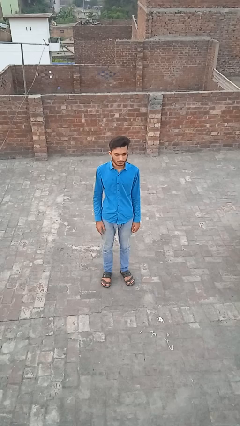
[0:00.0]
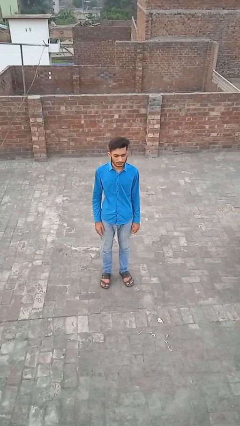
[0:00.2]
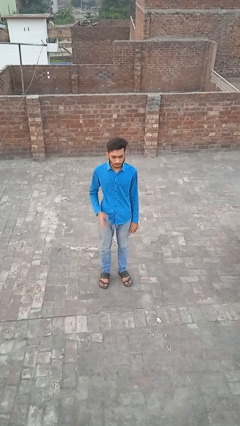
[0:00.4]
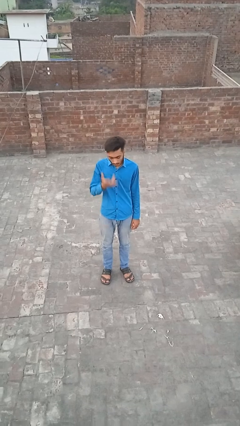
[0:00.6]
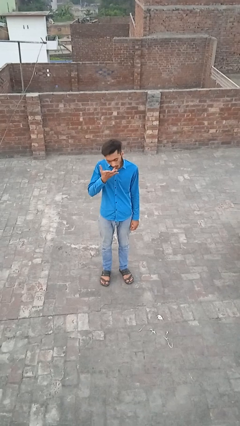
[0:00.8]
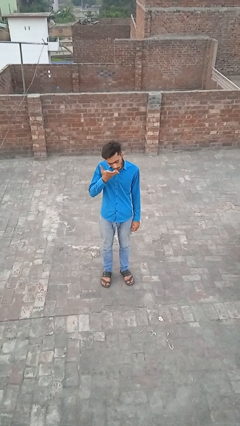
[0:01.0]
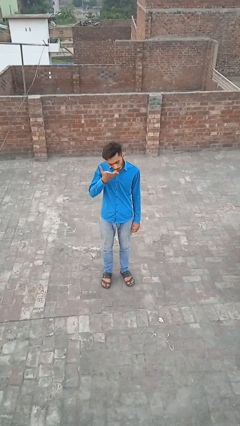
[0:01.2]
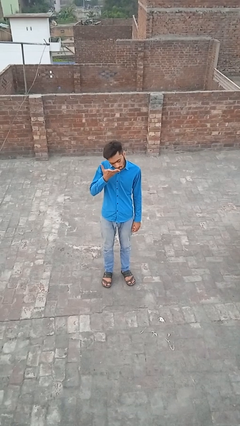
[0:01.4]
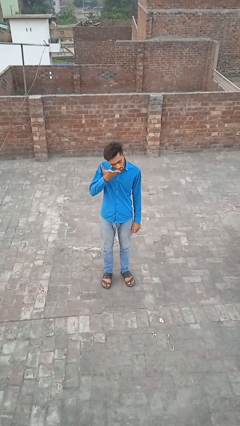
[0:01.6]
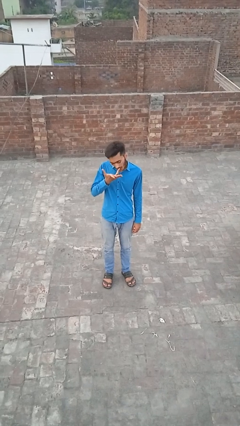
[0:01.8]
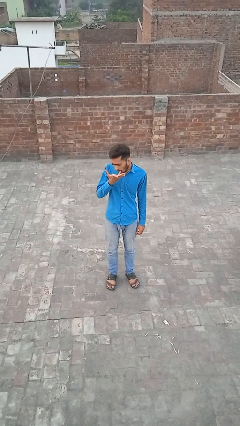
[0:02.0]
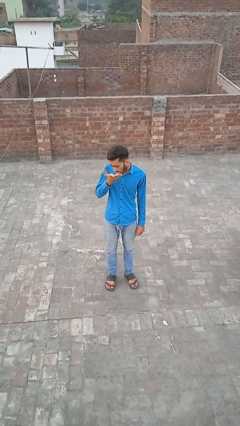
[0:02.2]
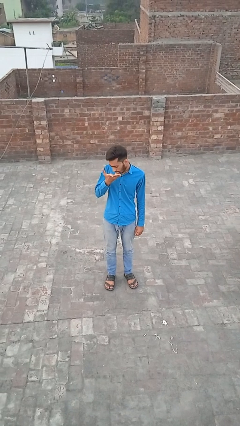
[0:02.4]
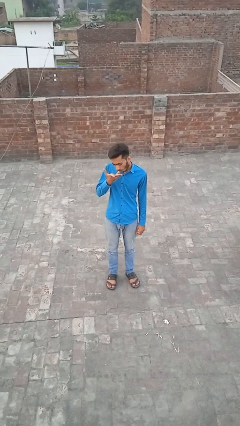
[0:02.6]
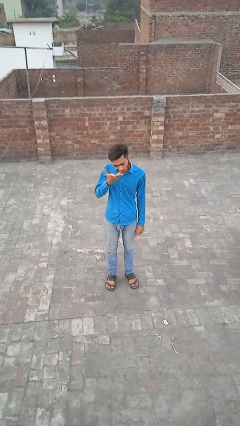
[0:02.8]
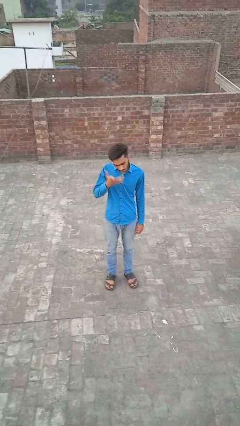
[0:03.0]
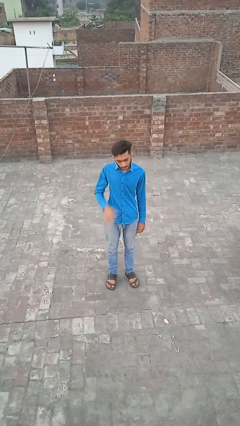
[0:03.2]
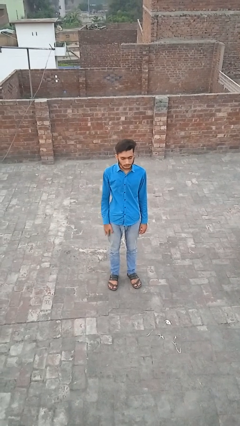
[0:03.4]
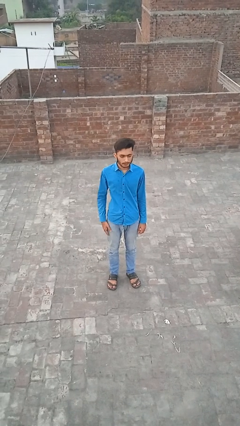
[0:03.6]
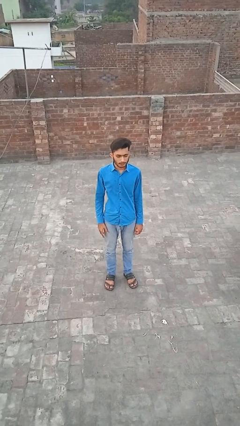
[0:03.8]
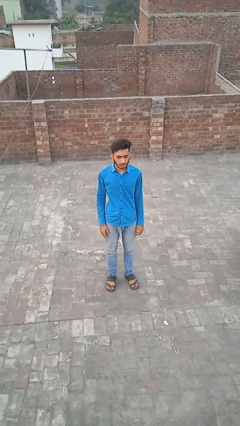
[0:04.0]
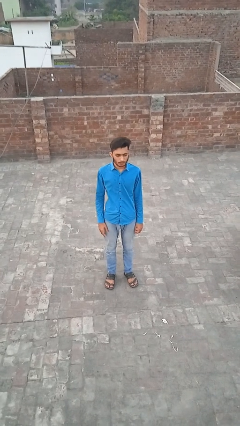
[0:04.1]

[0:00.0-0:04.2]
person licks fingers

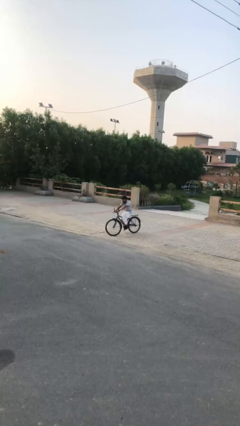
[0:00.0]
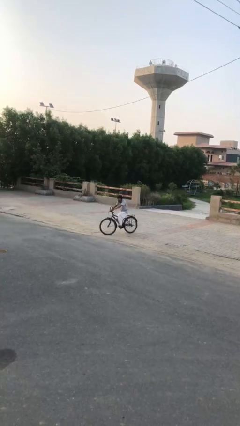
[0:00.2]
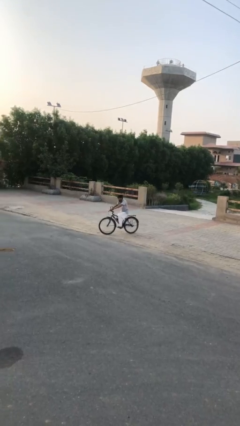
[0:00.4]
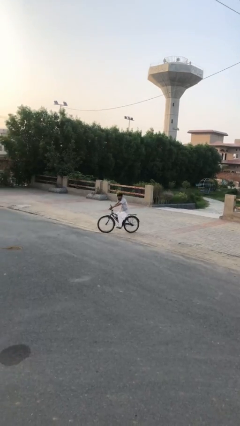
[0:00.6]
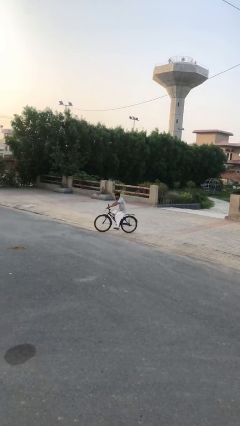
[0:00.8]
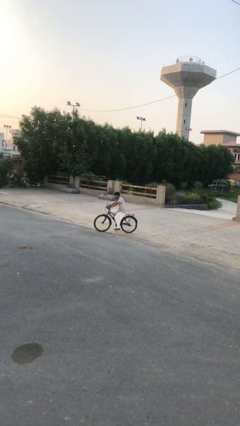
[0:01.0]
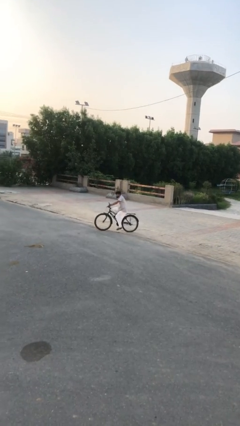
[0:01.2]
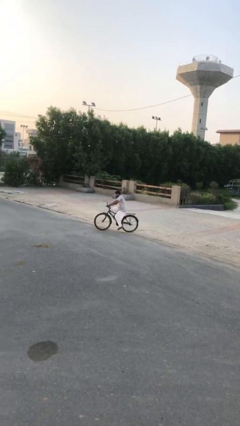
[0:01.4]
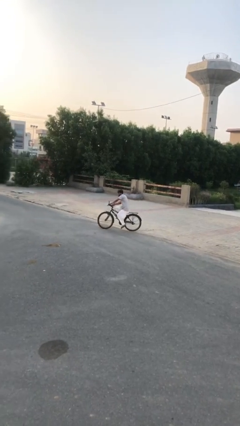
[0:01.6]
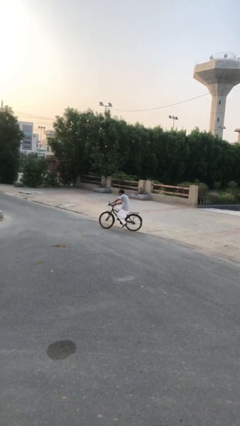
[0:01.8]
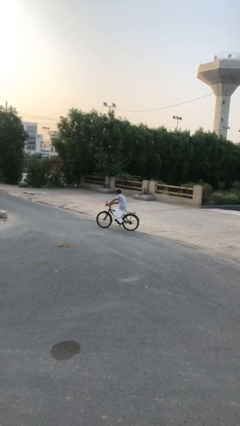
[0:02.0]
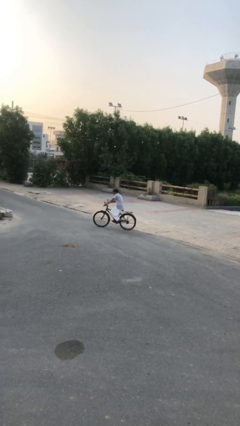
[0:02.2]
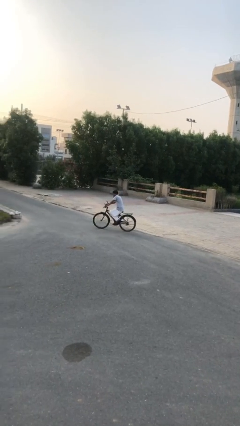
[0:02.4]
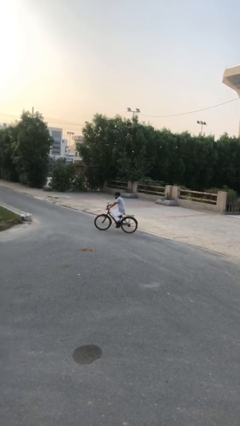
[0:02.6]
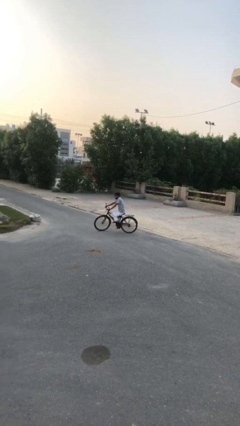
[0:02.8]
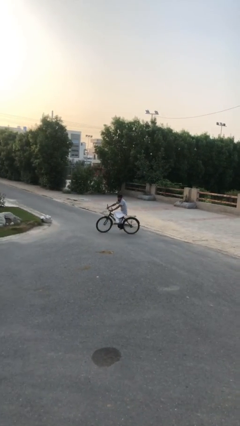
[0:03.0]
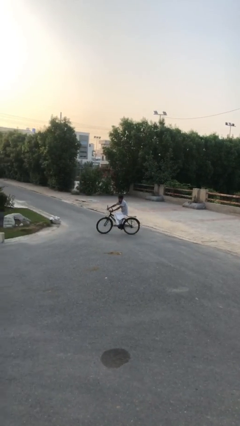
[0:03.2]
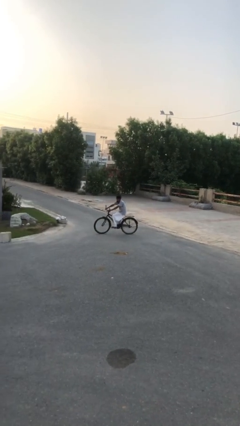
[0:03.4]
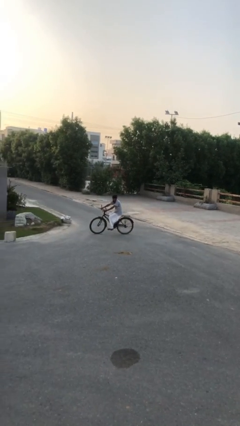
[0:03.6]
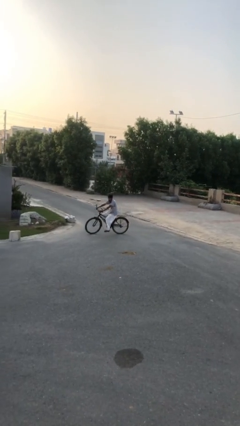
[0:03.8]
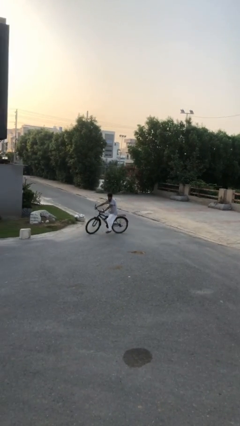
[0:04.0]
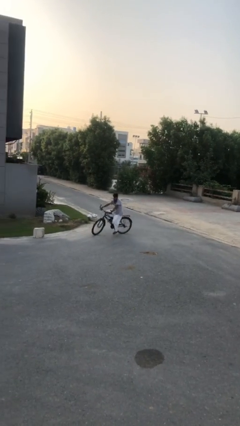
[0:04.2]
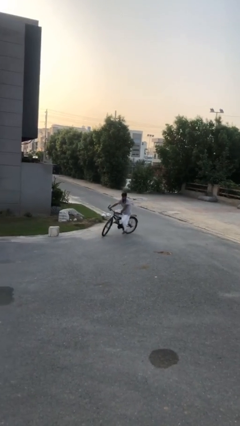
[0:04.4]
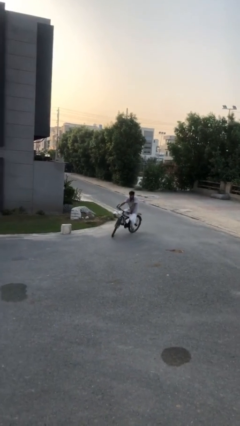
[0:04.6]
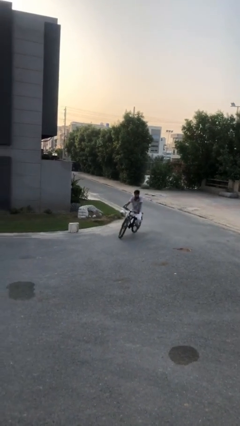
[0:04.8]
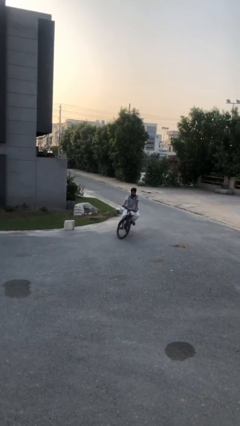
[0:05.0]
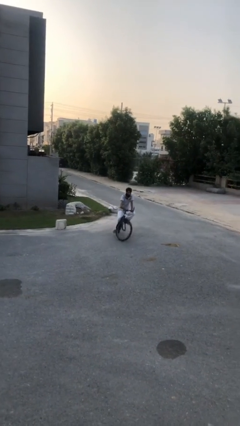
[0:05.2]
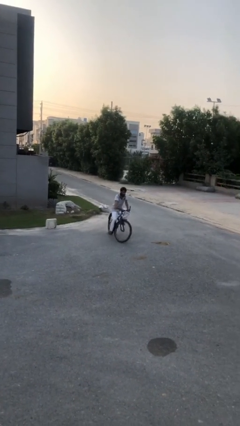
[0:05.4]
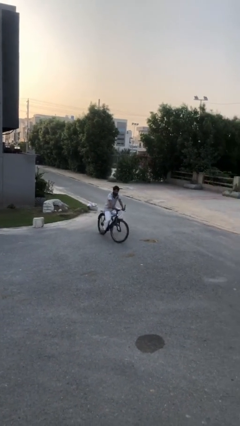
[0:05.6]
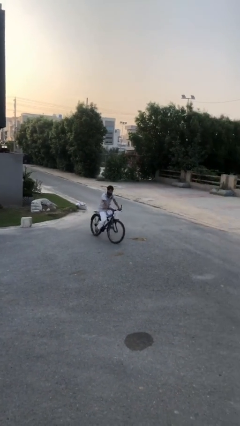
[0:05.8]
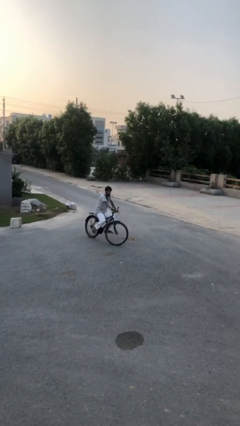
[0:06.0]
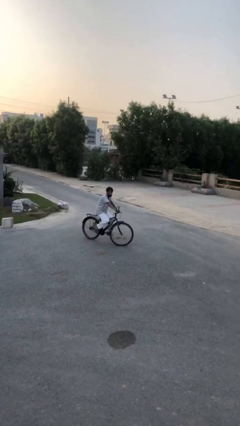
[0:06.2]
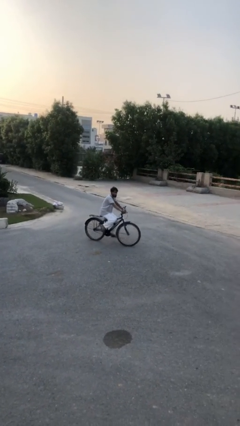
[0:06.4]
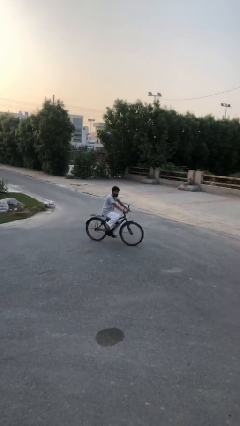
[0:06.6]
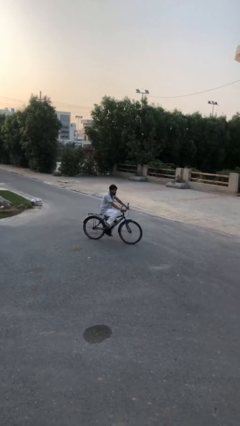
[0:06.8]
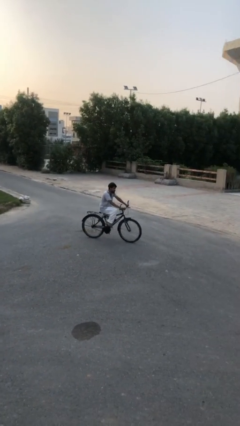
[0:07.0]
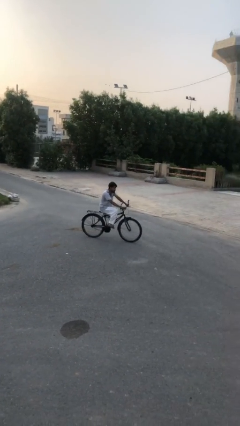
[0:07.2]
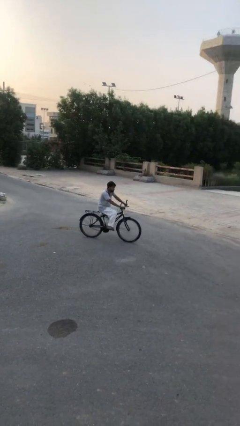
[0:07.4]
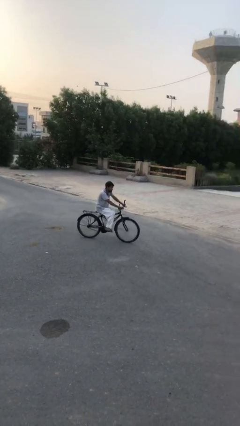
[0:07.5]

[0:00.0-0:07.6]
person rides bicycle

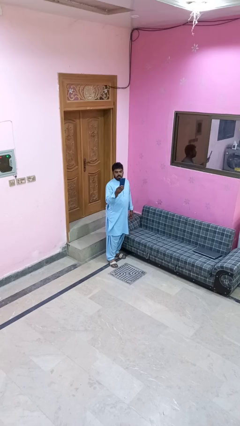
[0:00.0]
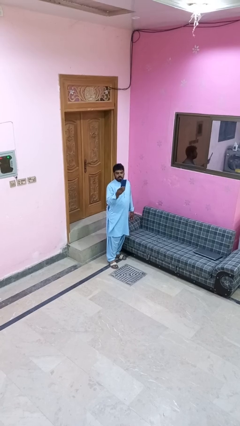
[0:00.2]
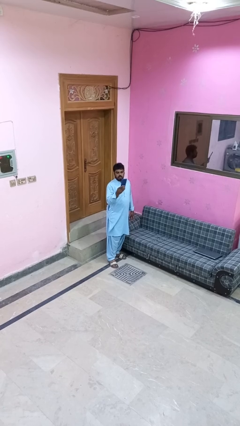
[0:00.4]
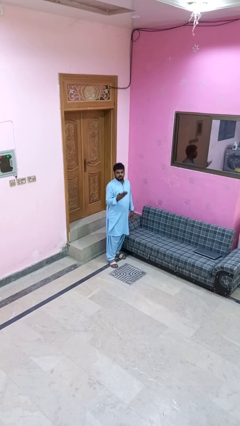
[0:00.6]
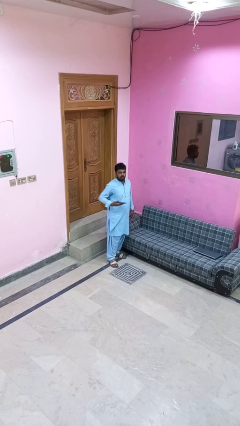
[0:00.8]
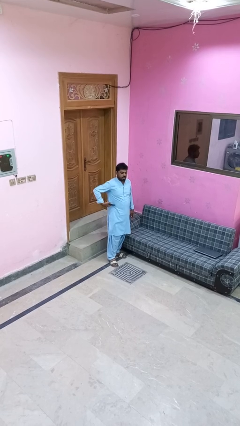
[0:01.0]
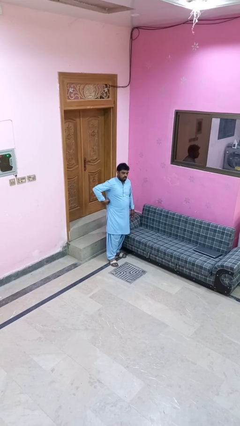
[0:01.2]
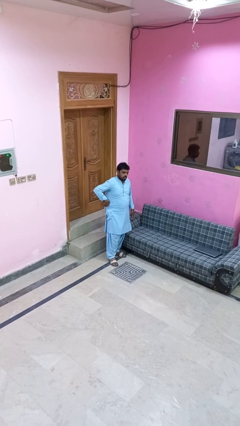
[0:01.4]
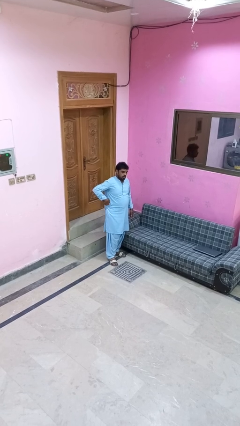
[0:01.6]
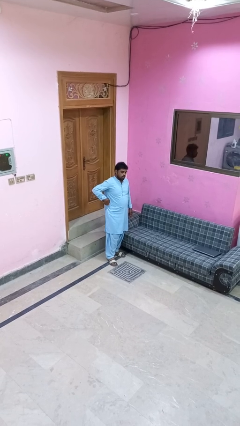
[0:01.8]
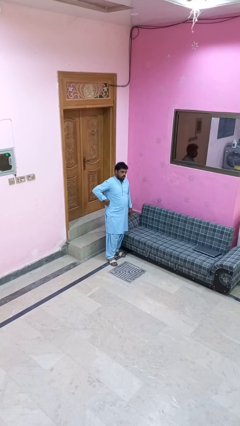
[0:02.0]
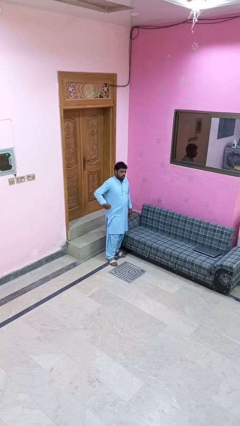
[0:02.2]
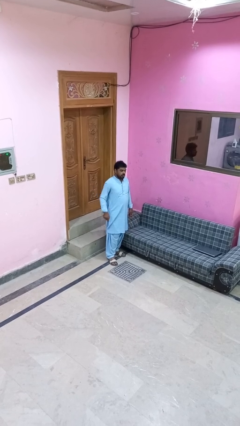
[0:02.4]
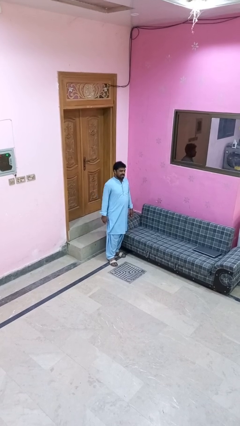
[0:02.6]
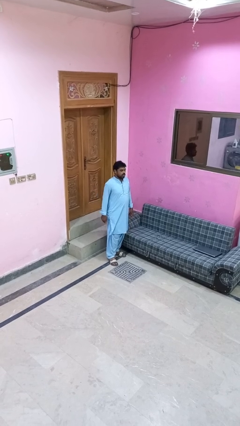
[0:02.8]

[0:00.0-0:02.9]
person puts phone into pocket

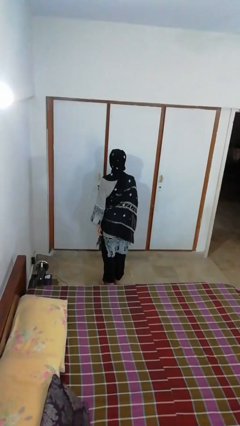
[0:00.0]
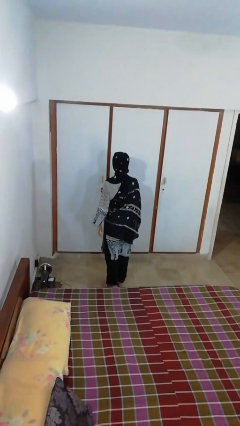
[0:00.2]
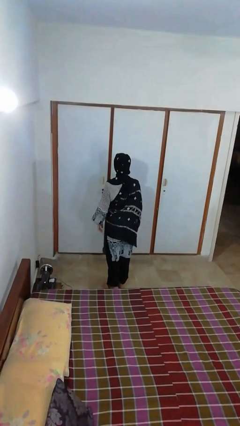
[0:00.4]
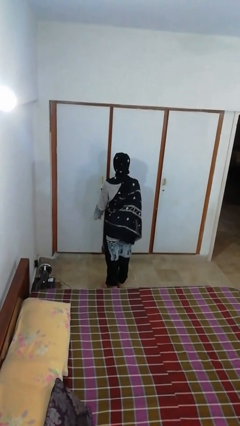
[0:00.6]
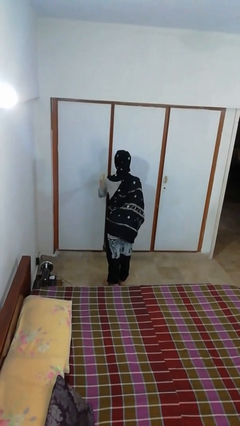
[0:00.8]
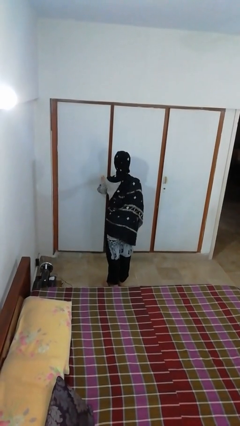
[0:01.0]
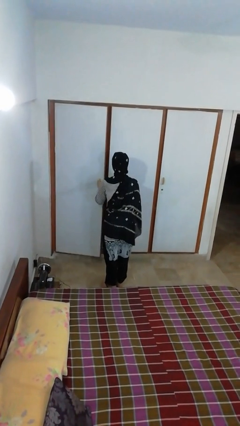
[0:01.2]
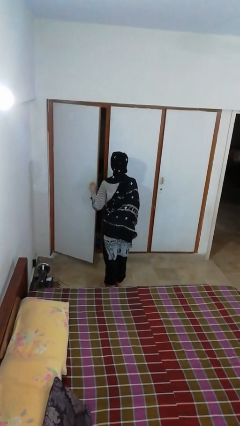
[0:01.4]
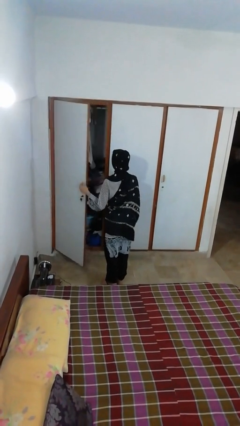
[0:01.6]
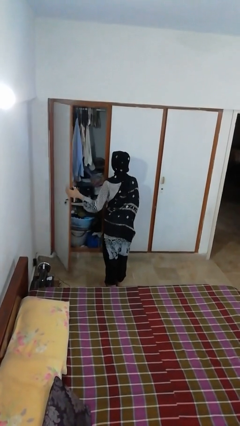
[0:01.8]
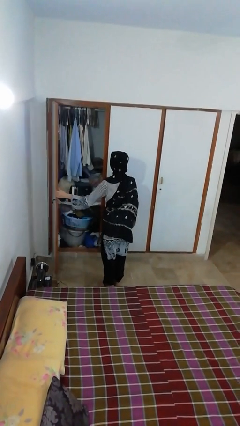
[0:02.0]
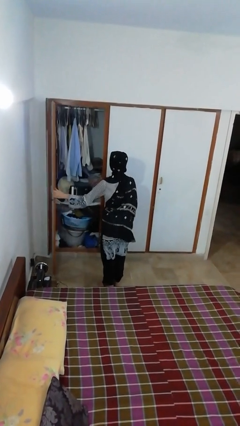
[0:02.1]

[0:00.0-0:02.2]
person opens closet door

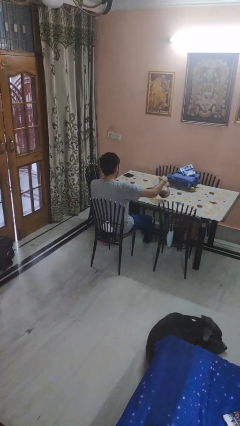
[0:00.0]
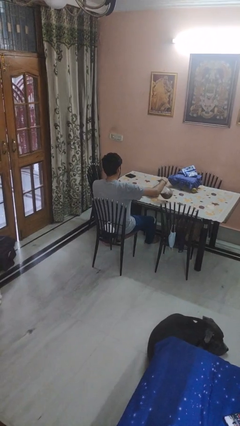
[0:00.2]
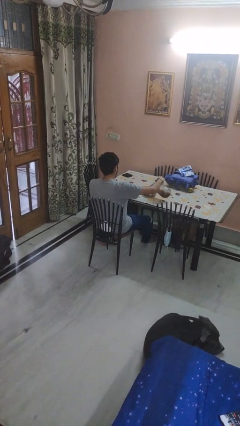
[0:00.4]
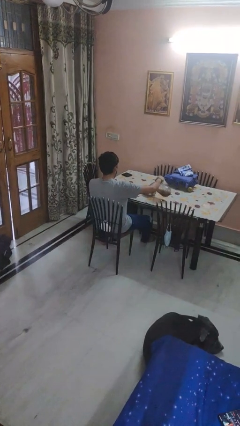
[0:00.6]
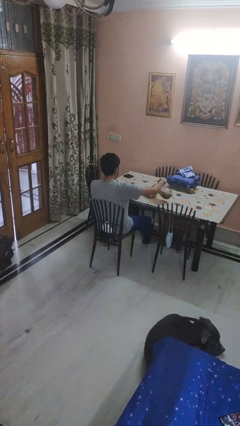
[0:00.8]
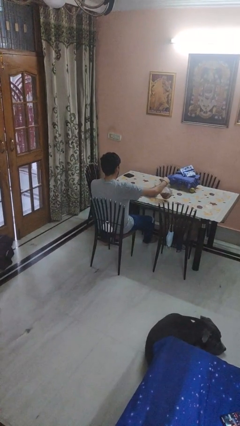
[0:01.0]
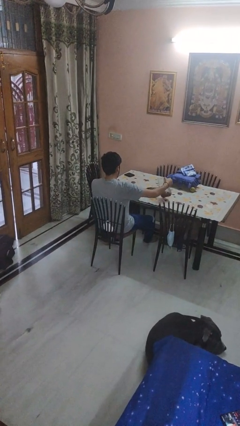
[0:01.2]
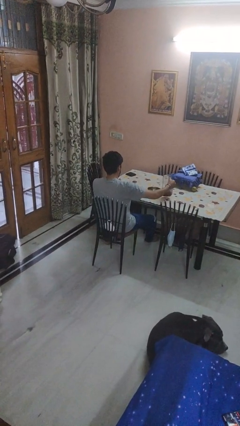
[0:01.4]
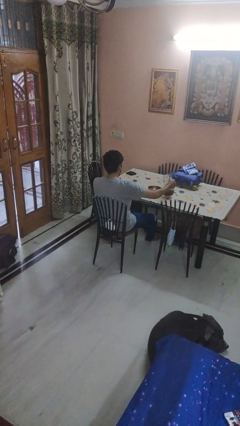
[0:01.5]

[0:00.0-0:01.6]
person pours into bowl
